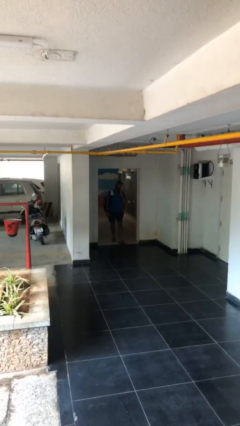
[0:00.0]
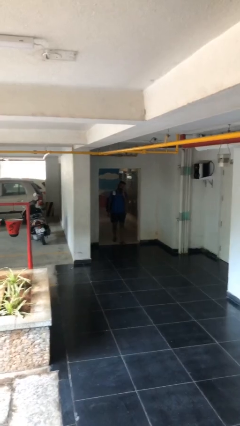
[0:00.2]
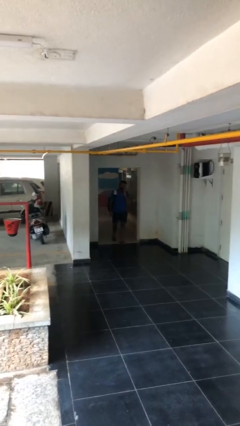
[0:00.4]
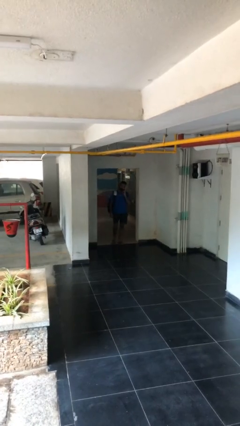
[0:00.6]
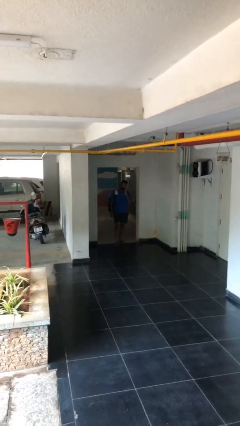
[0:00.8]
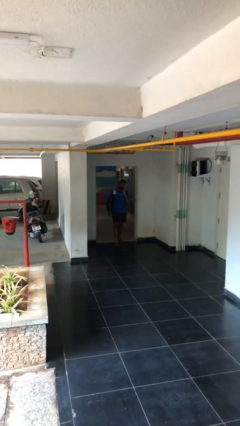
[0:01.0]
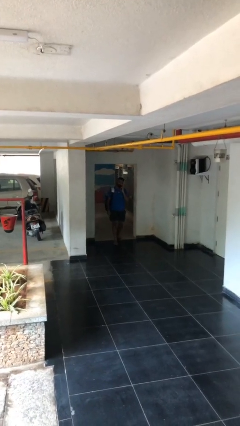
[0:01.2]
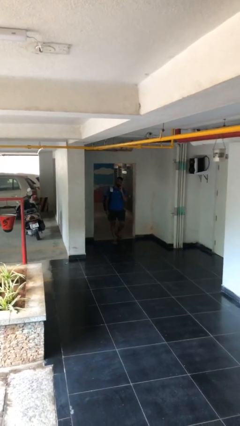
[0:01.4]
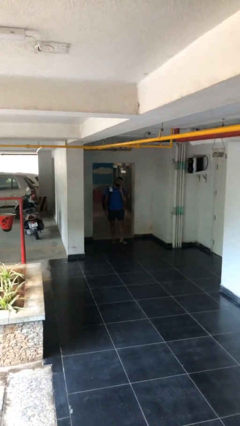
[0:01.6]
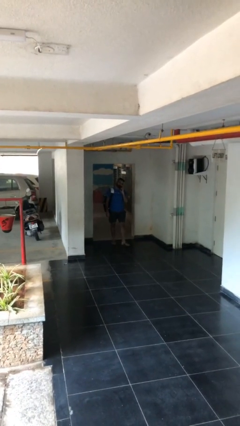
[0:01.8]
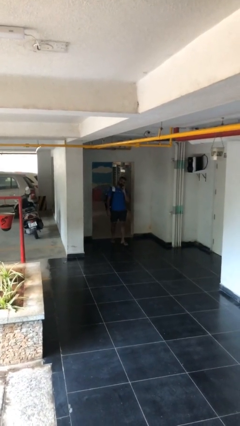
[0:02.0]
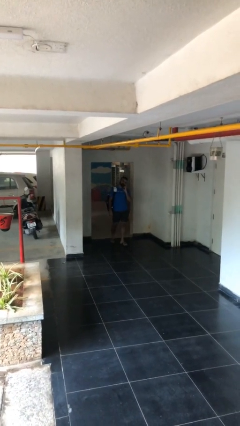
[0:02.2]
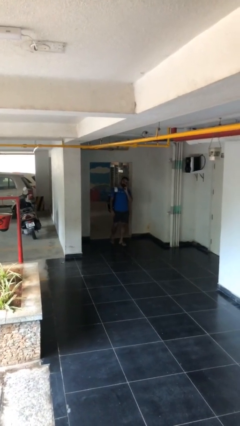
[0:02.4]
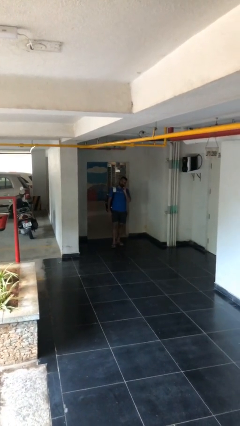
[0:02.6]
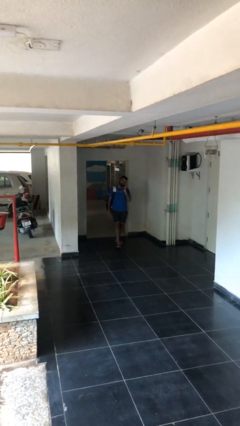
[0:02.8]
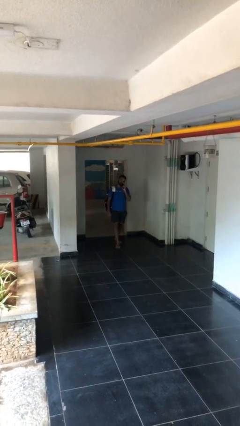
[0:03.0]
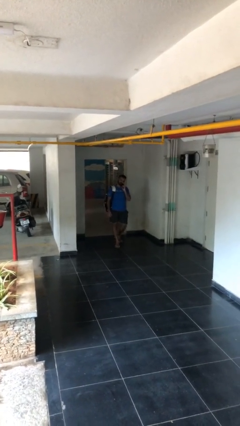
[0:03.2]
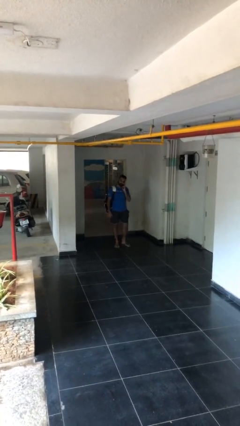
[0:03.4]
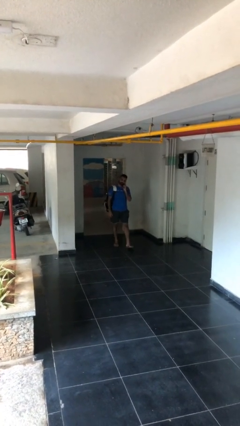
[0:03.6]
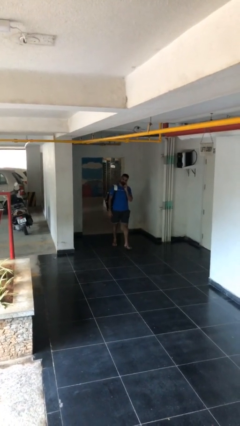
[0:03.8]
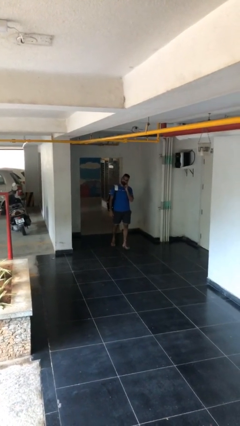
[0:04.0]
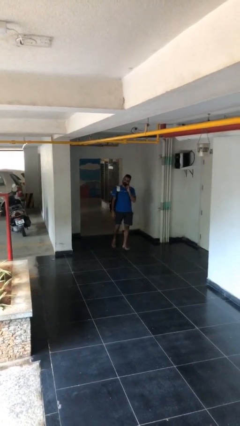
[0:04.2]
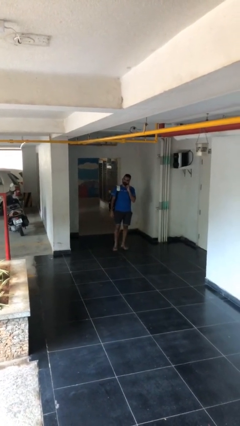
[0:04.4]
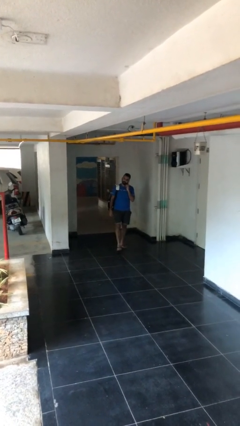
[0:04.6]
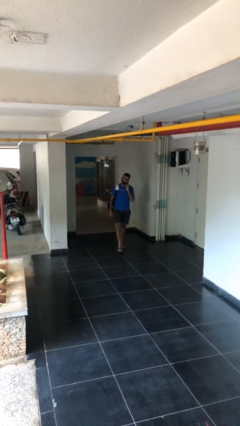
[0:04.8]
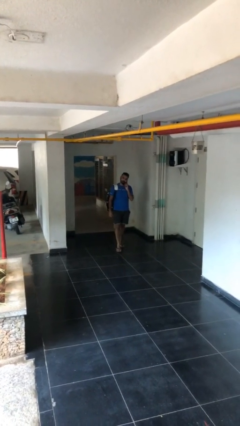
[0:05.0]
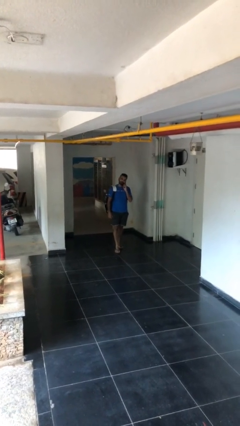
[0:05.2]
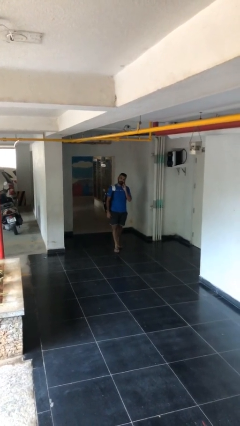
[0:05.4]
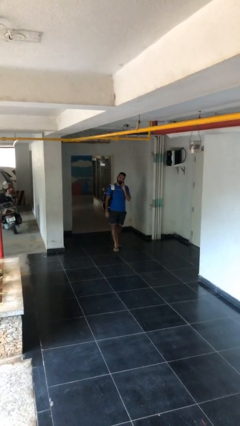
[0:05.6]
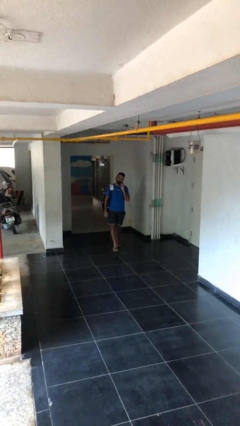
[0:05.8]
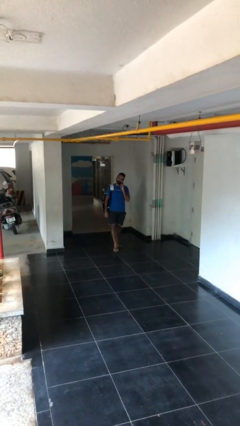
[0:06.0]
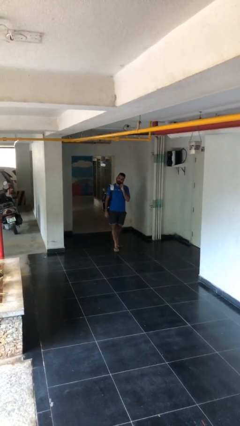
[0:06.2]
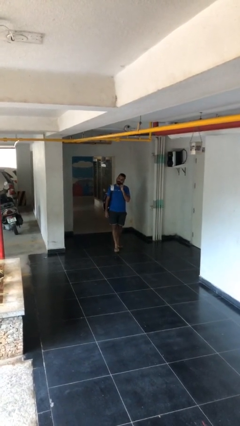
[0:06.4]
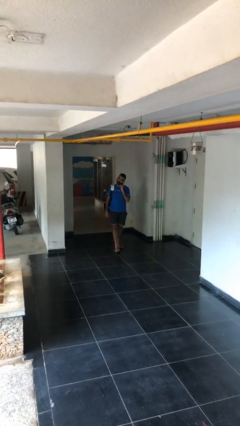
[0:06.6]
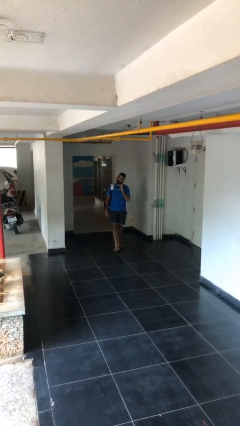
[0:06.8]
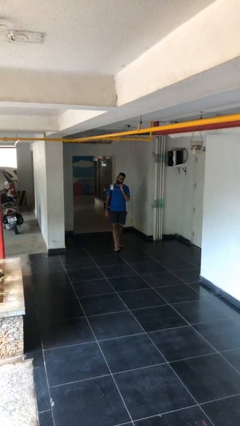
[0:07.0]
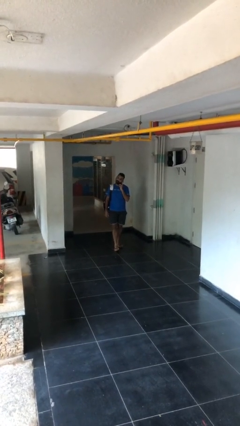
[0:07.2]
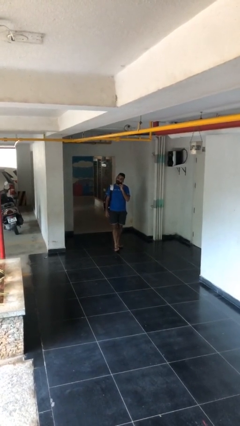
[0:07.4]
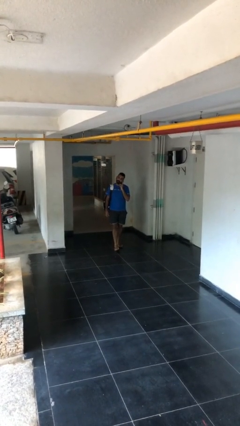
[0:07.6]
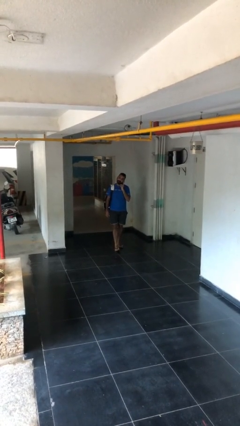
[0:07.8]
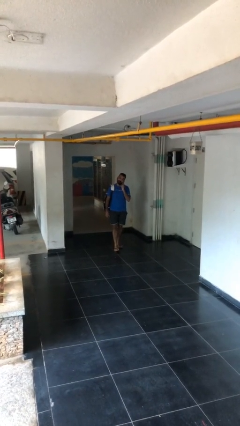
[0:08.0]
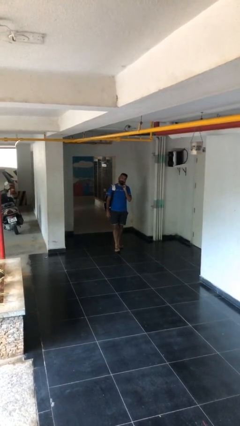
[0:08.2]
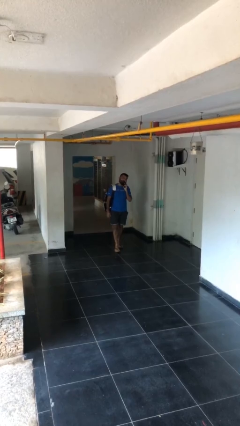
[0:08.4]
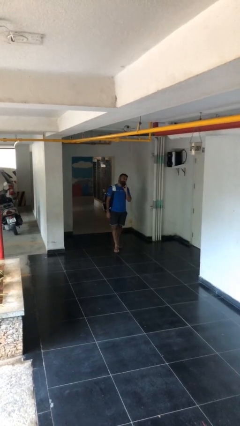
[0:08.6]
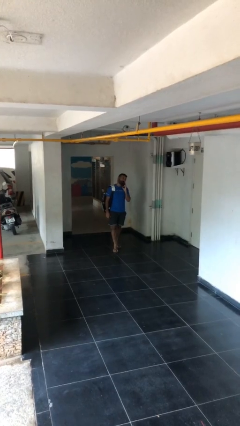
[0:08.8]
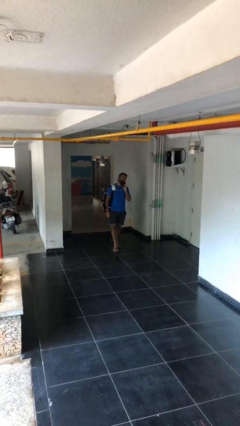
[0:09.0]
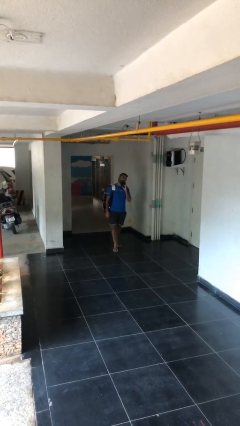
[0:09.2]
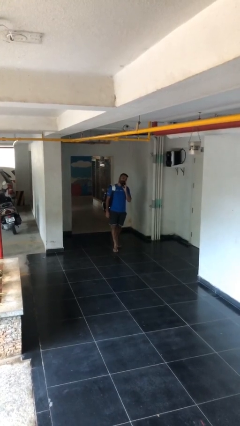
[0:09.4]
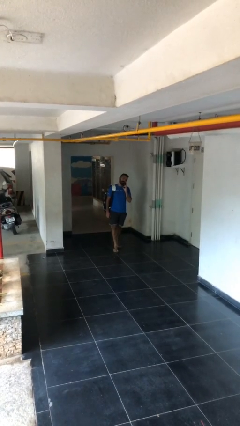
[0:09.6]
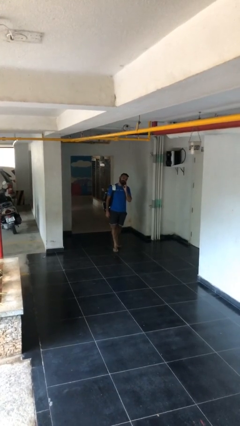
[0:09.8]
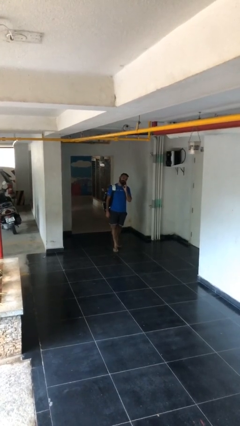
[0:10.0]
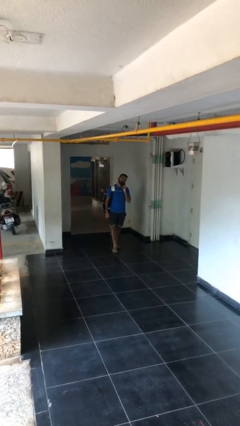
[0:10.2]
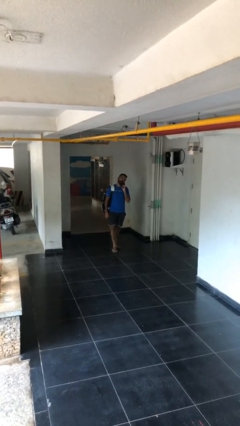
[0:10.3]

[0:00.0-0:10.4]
person enters scene through structure

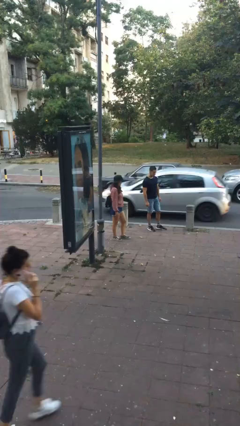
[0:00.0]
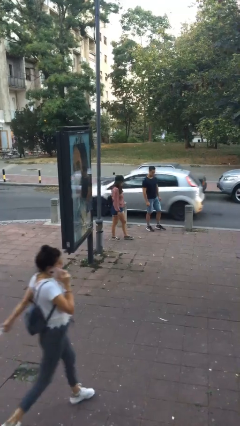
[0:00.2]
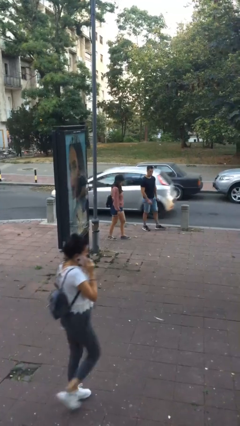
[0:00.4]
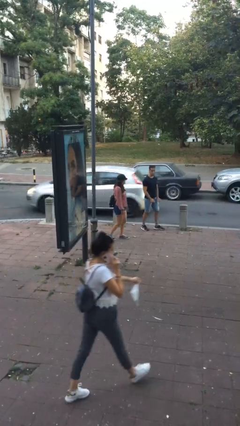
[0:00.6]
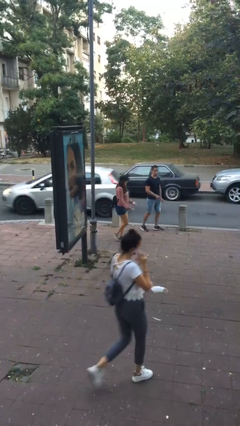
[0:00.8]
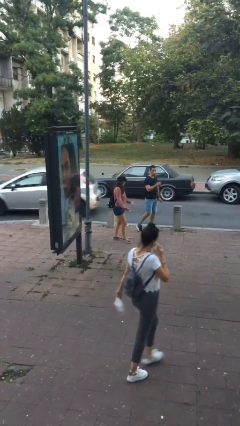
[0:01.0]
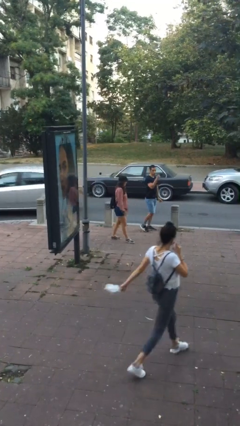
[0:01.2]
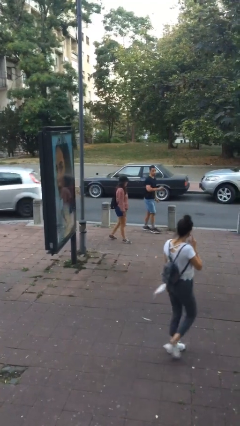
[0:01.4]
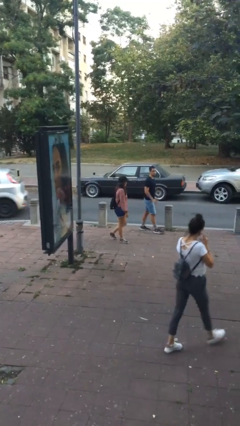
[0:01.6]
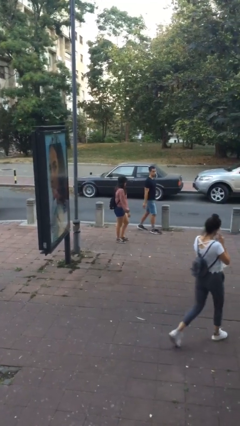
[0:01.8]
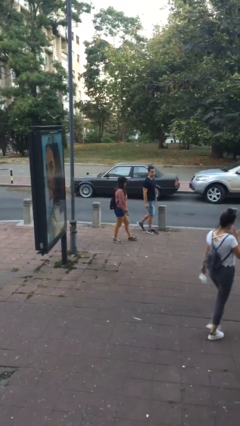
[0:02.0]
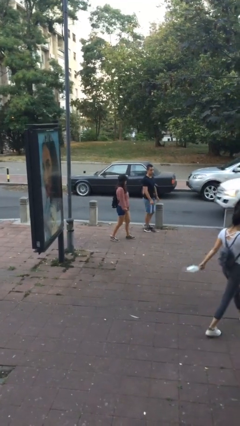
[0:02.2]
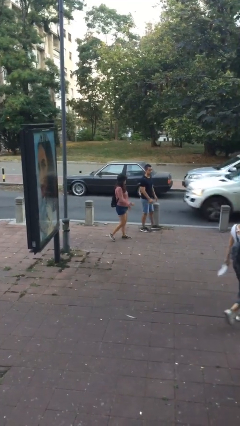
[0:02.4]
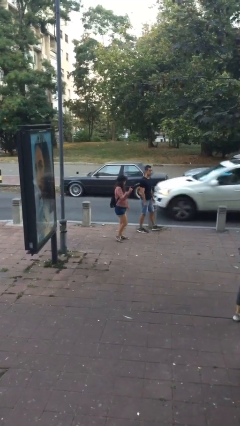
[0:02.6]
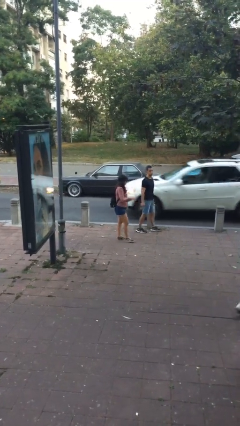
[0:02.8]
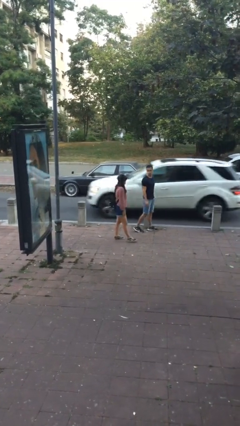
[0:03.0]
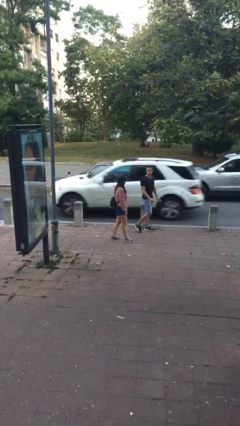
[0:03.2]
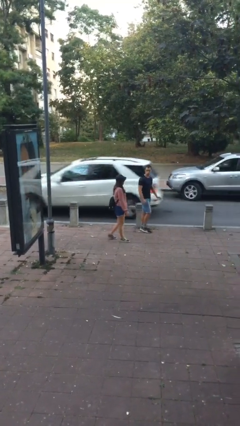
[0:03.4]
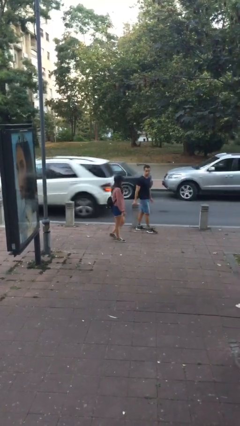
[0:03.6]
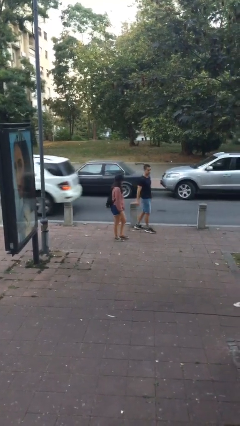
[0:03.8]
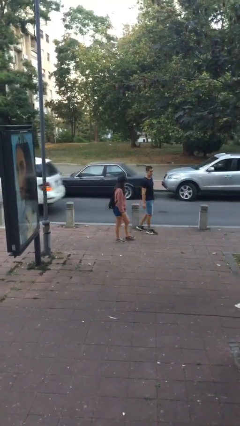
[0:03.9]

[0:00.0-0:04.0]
person talks to person

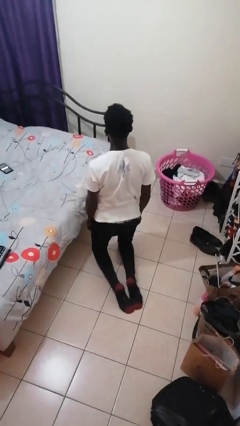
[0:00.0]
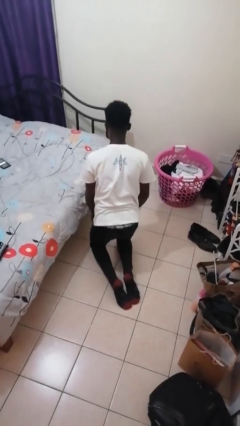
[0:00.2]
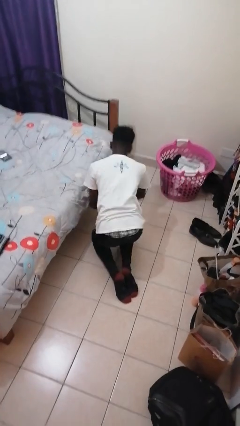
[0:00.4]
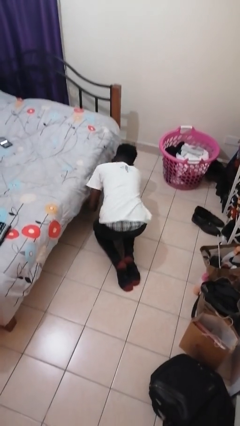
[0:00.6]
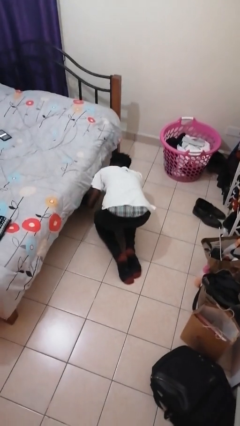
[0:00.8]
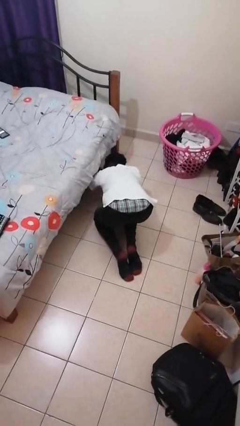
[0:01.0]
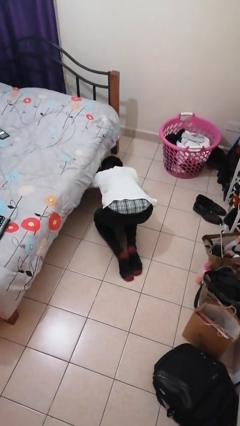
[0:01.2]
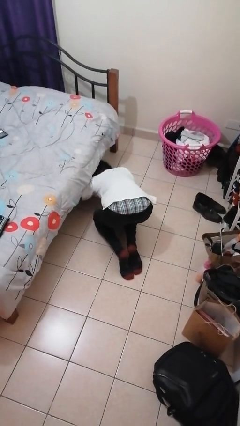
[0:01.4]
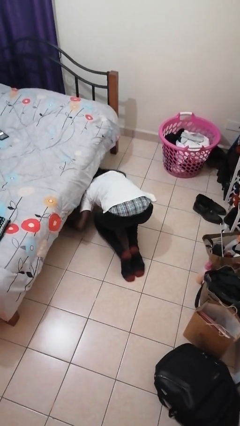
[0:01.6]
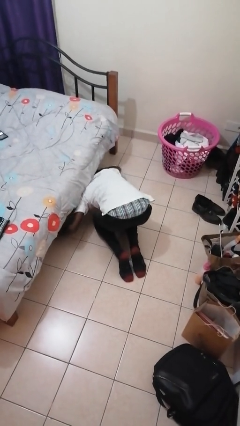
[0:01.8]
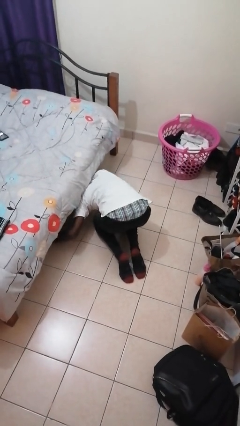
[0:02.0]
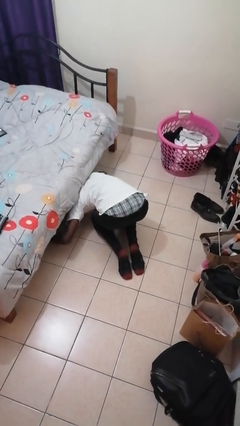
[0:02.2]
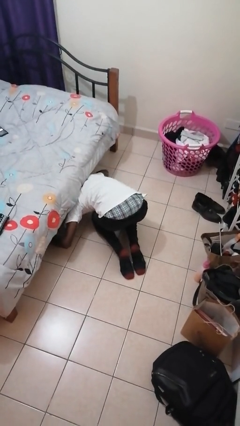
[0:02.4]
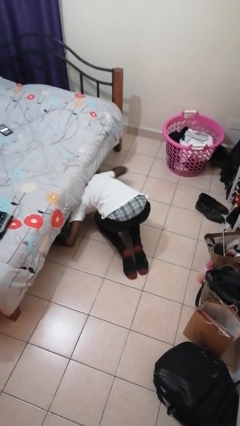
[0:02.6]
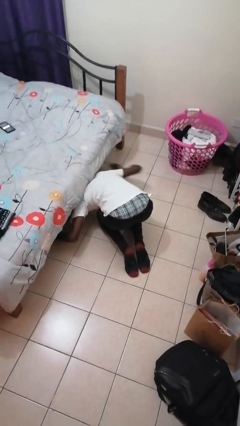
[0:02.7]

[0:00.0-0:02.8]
person searches under bed

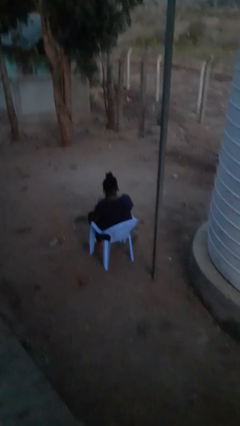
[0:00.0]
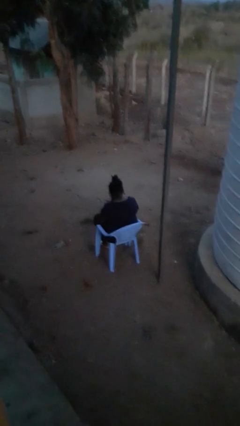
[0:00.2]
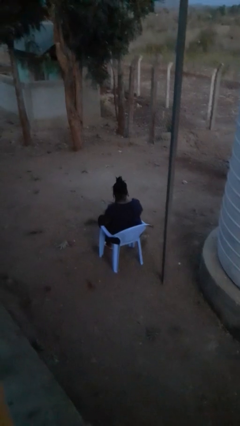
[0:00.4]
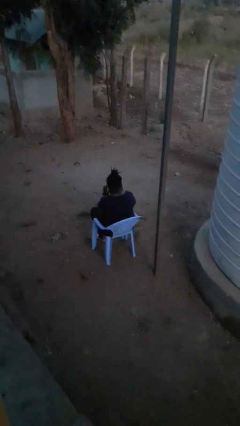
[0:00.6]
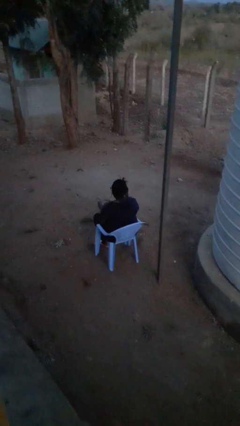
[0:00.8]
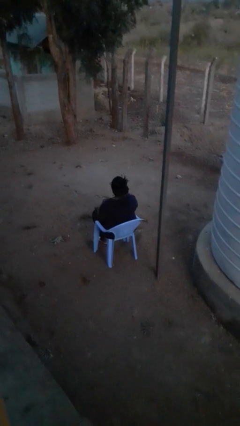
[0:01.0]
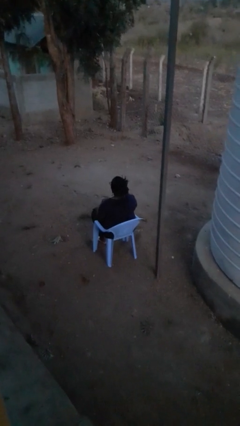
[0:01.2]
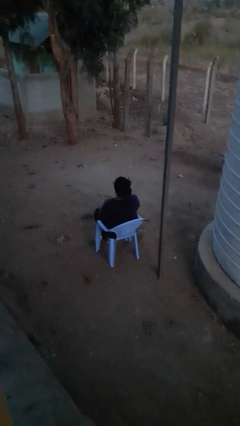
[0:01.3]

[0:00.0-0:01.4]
person prays
